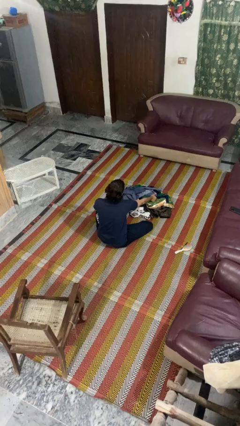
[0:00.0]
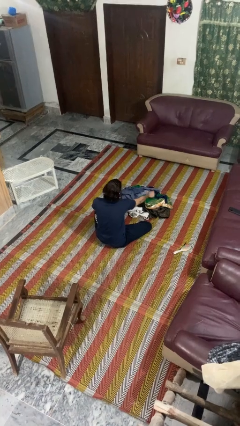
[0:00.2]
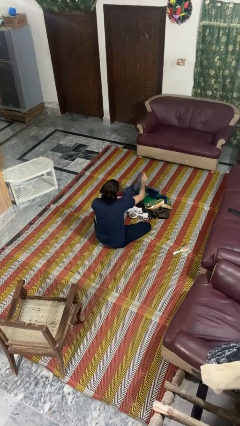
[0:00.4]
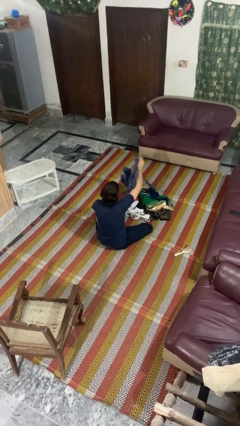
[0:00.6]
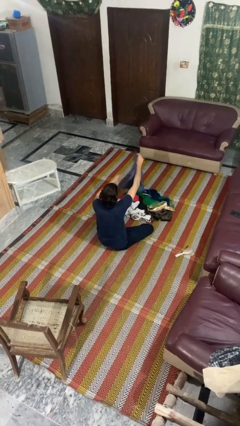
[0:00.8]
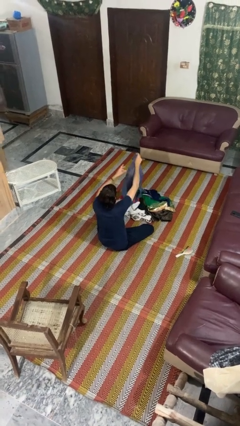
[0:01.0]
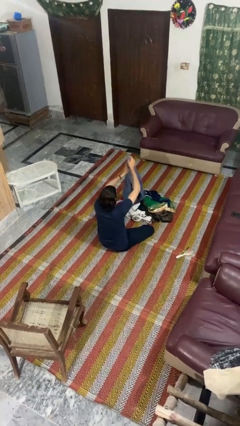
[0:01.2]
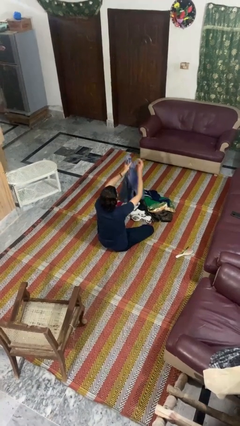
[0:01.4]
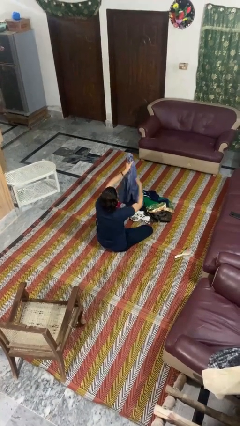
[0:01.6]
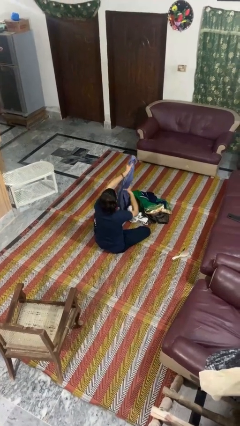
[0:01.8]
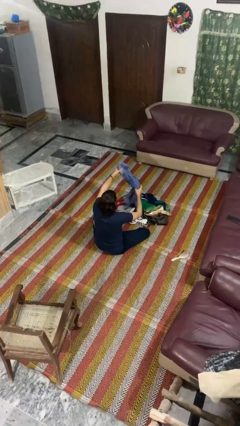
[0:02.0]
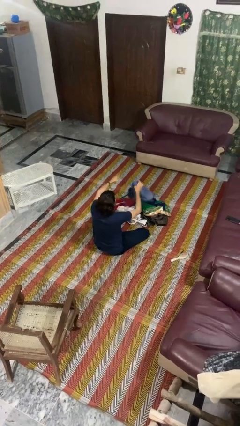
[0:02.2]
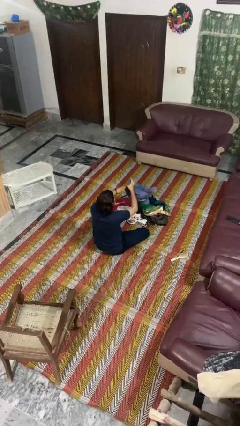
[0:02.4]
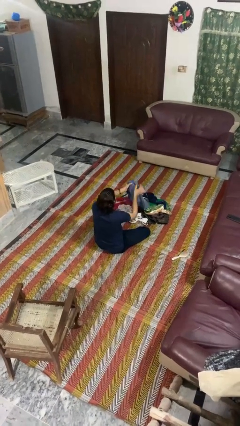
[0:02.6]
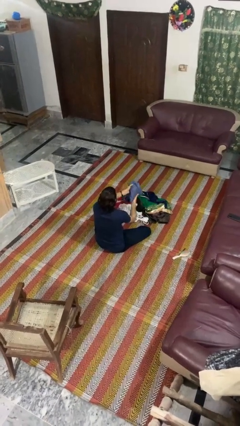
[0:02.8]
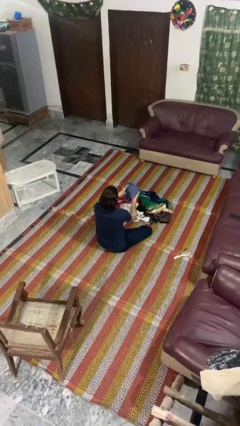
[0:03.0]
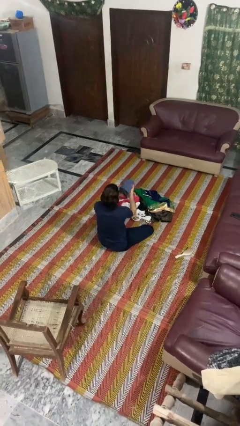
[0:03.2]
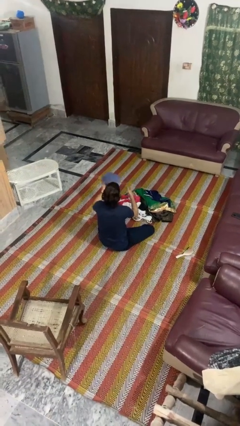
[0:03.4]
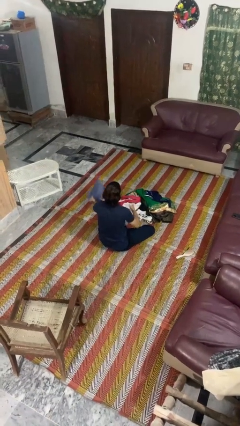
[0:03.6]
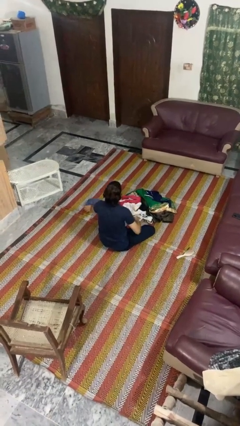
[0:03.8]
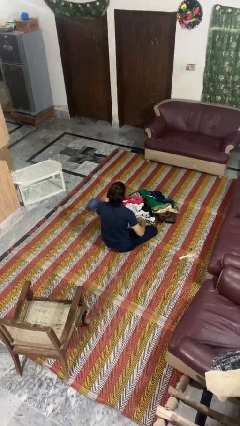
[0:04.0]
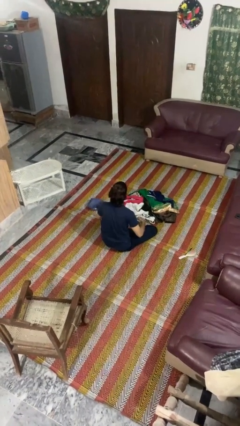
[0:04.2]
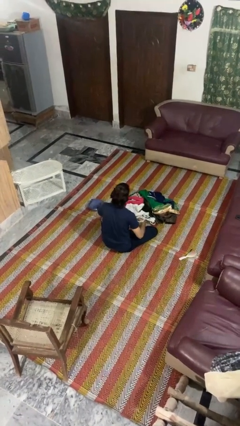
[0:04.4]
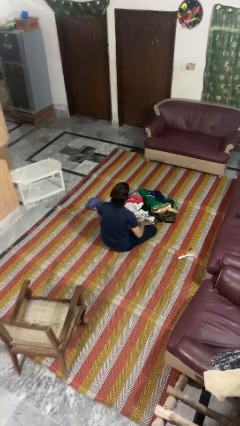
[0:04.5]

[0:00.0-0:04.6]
person folds pants

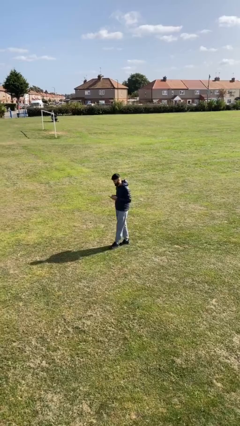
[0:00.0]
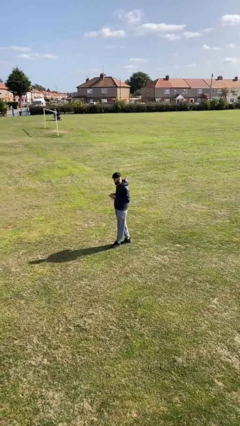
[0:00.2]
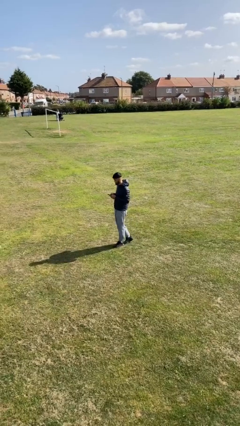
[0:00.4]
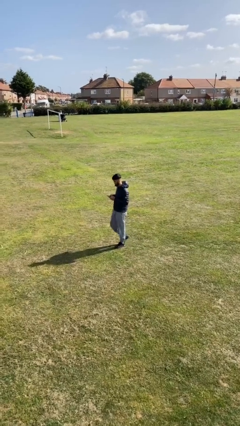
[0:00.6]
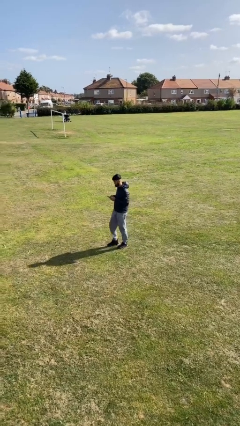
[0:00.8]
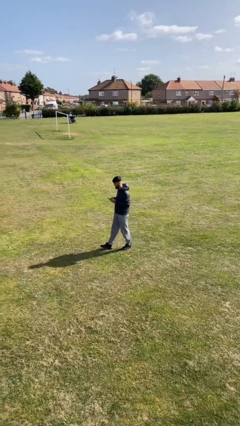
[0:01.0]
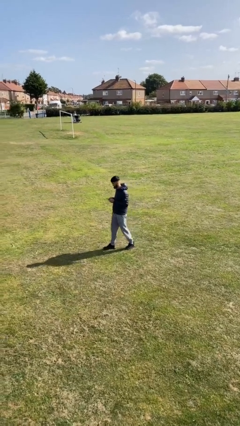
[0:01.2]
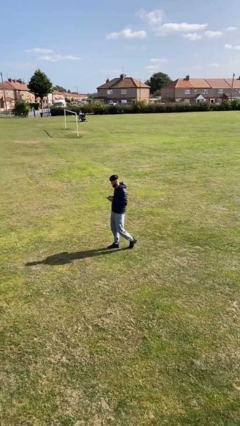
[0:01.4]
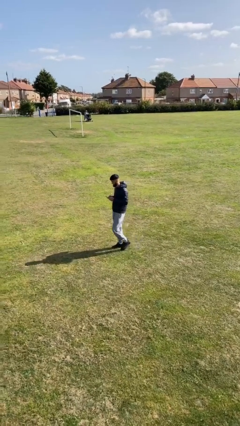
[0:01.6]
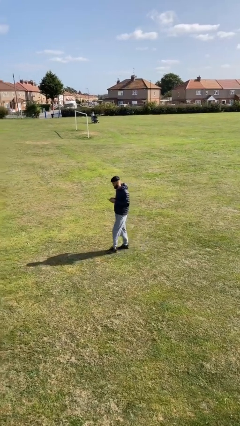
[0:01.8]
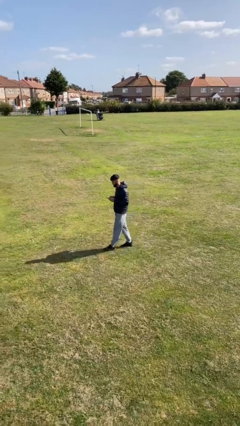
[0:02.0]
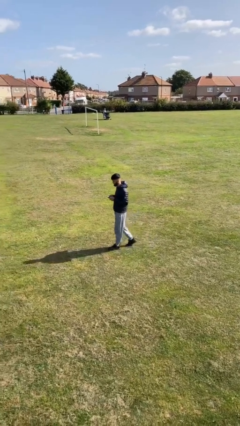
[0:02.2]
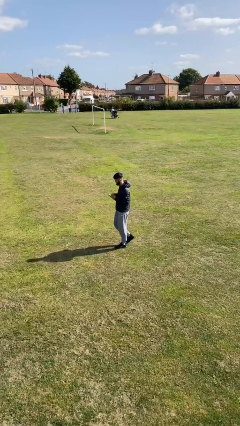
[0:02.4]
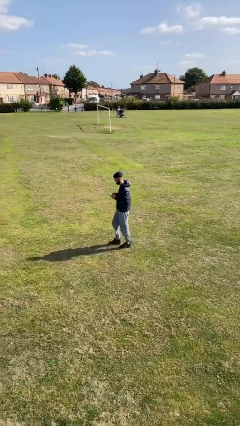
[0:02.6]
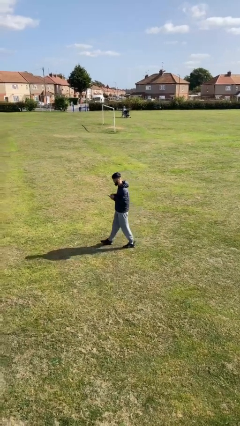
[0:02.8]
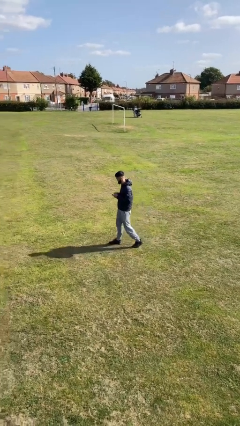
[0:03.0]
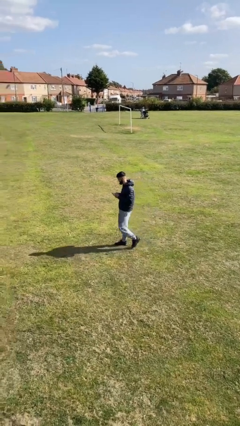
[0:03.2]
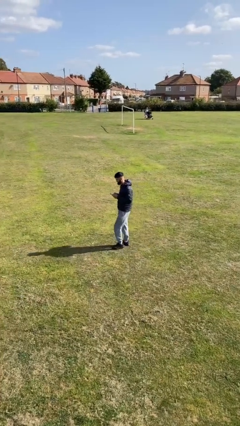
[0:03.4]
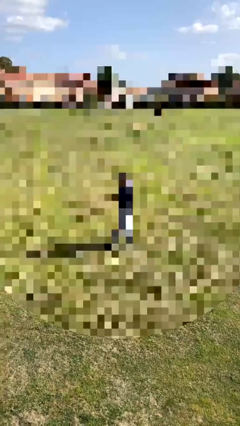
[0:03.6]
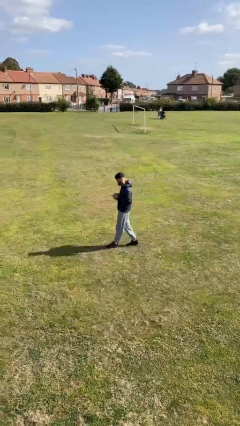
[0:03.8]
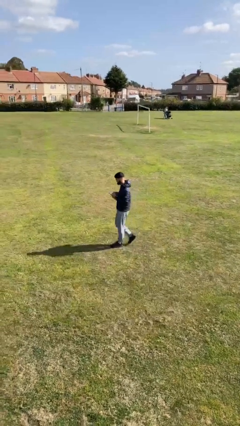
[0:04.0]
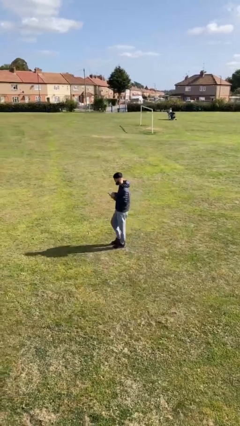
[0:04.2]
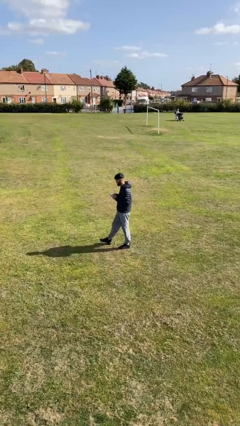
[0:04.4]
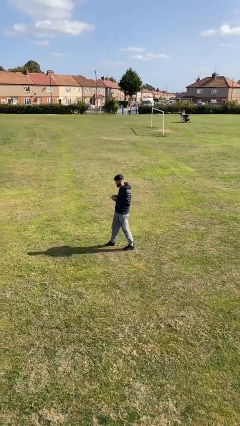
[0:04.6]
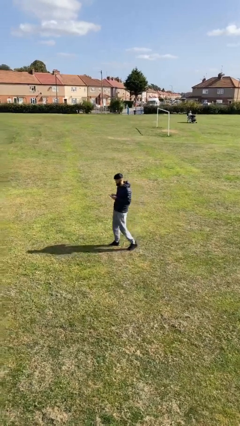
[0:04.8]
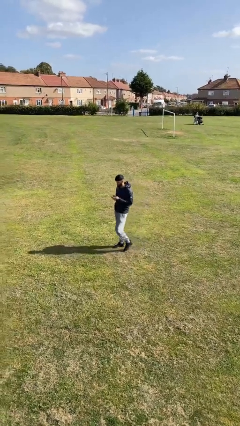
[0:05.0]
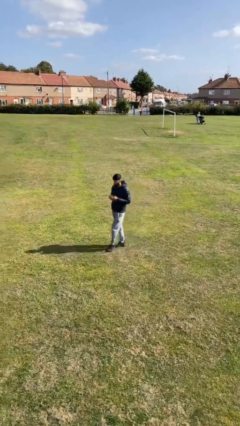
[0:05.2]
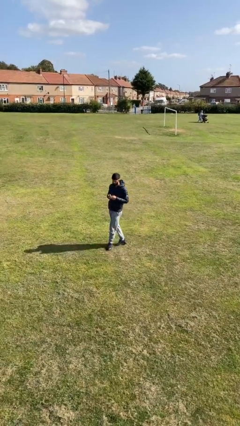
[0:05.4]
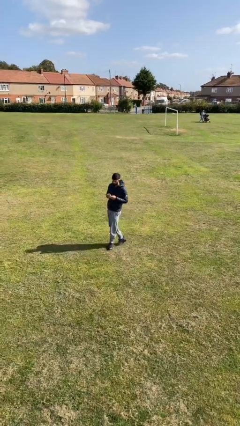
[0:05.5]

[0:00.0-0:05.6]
person texts on phone

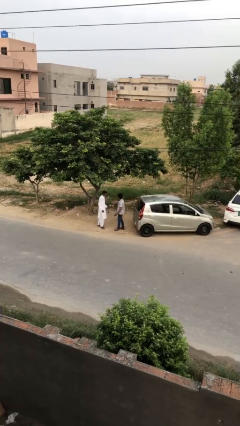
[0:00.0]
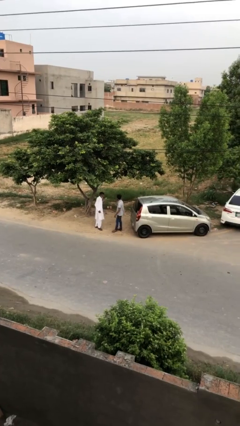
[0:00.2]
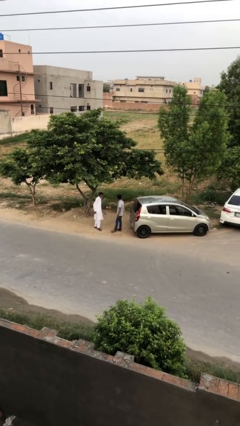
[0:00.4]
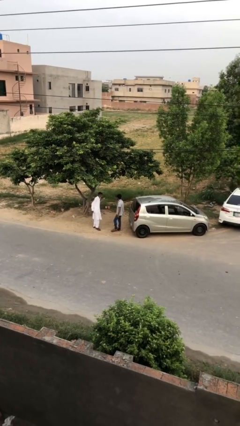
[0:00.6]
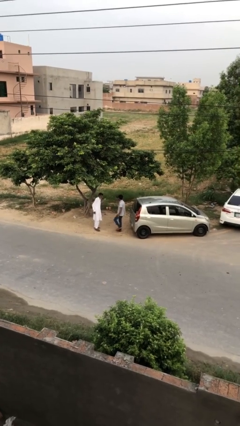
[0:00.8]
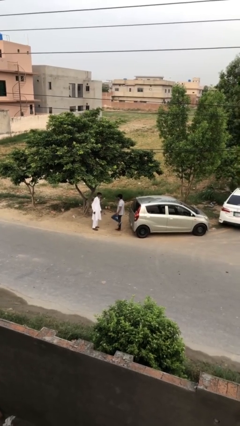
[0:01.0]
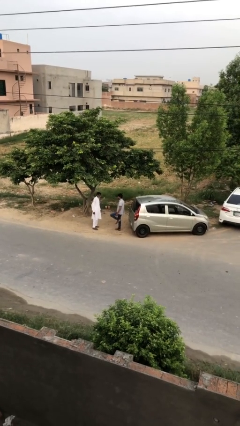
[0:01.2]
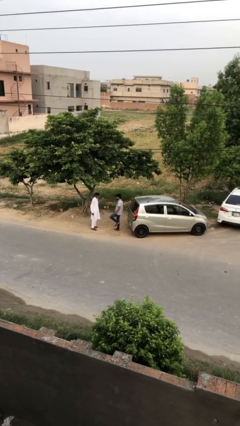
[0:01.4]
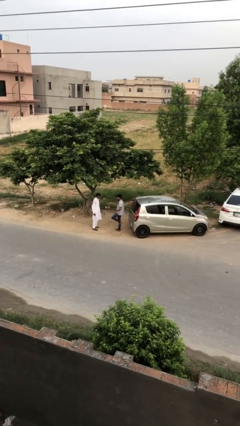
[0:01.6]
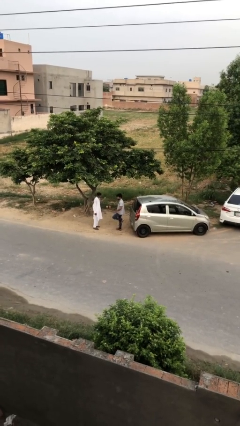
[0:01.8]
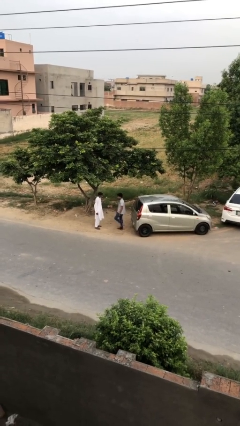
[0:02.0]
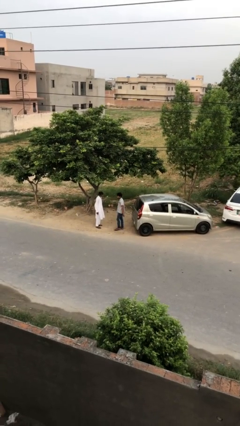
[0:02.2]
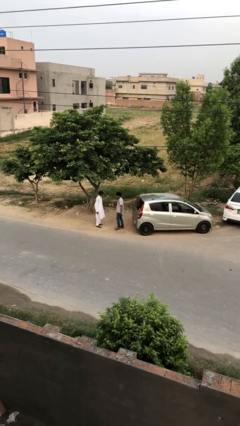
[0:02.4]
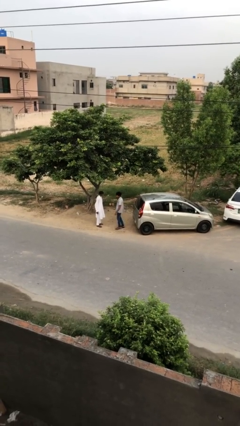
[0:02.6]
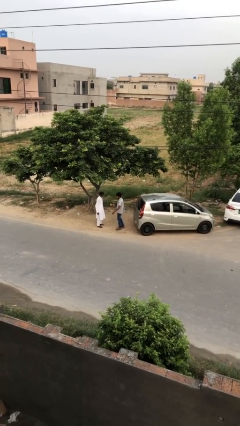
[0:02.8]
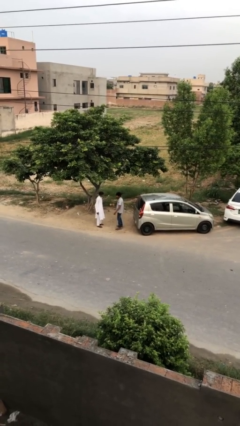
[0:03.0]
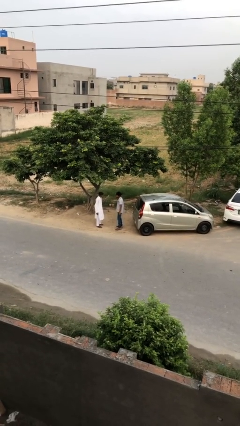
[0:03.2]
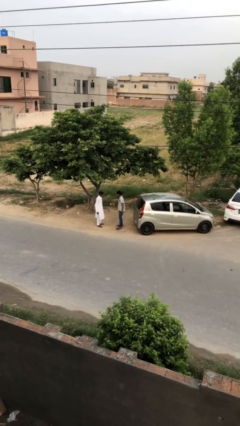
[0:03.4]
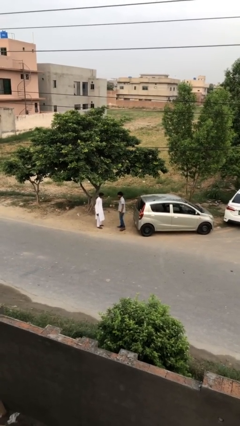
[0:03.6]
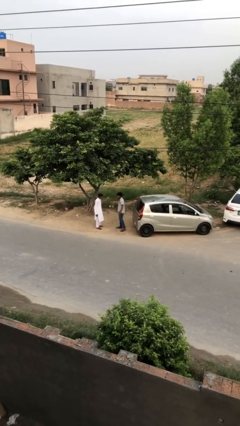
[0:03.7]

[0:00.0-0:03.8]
person talks to person

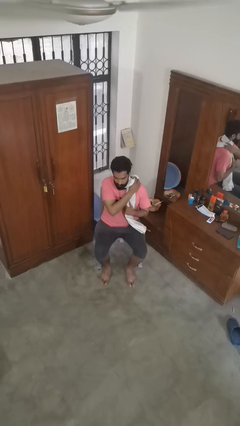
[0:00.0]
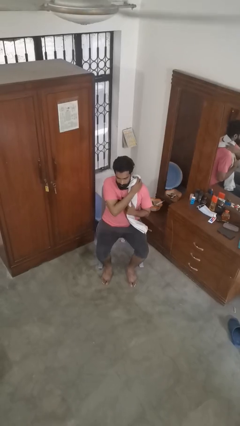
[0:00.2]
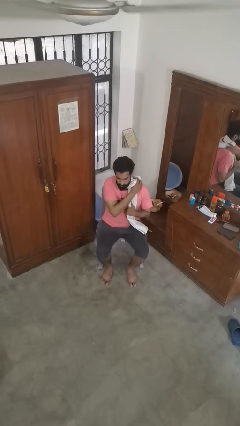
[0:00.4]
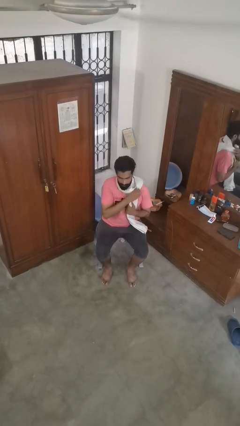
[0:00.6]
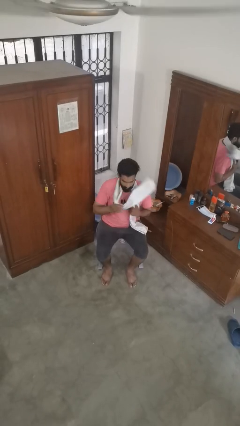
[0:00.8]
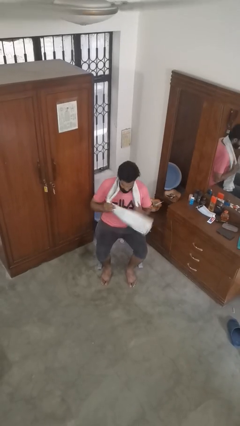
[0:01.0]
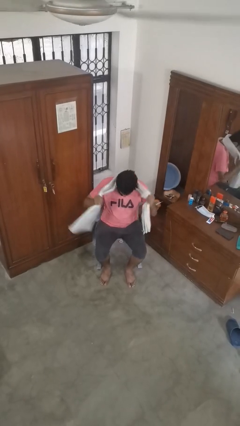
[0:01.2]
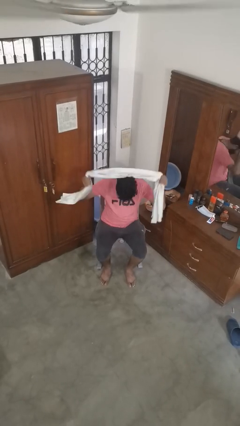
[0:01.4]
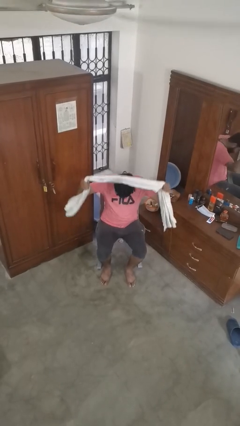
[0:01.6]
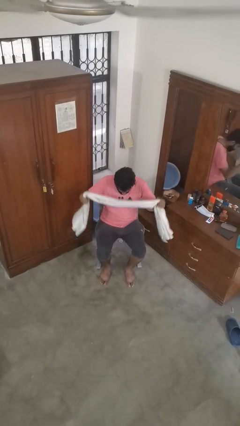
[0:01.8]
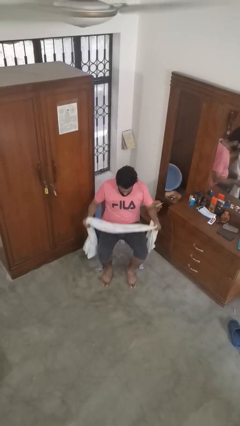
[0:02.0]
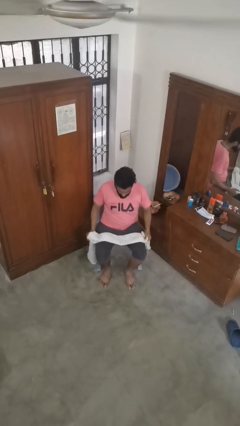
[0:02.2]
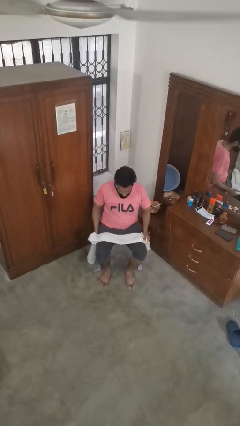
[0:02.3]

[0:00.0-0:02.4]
person takes off scarf

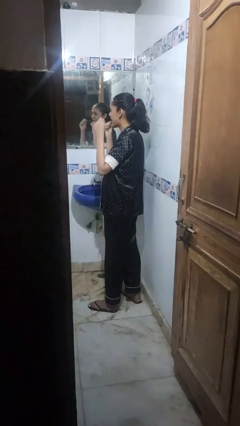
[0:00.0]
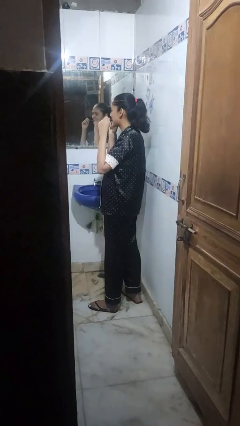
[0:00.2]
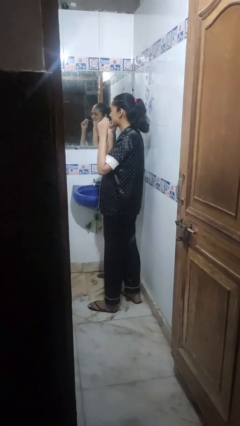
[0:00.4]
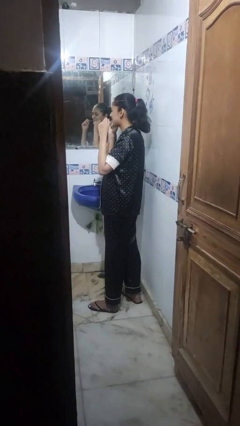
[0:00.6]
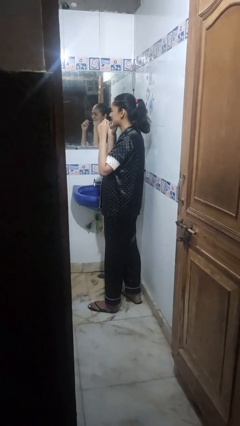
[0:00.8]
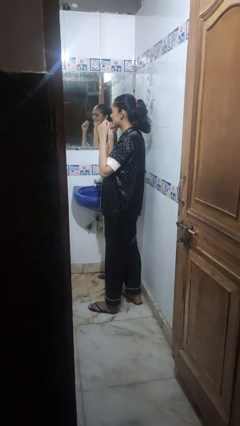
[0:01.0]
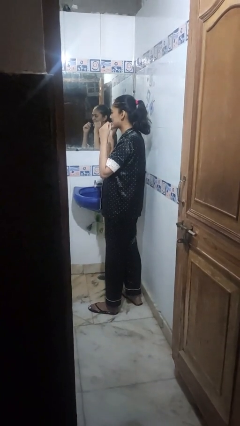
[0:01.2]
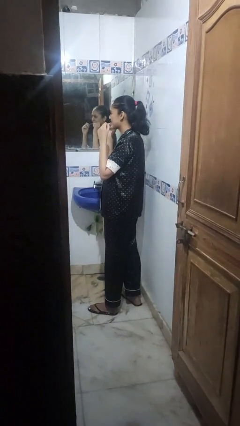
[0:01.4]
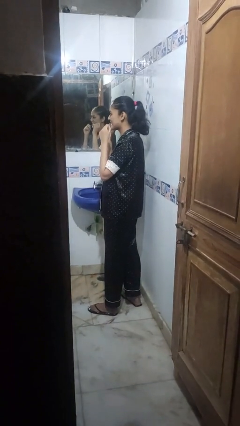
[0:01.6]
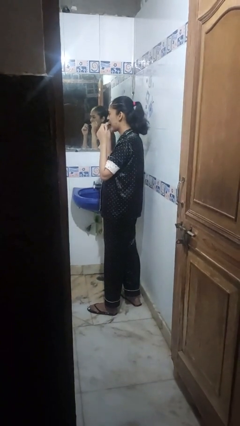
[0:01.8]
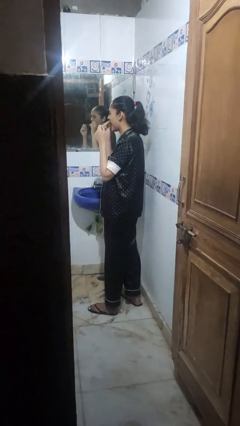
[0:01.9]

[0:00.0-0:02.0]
person flosses
